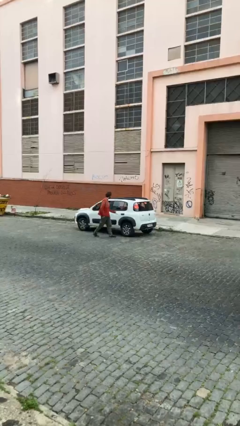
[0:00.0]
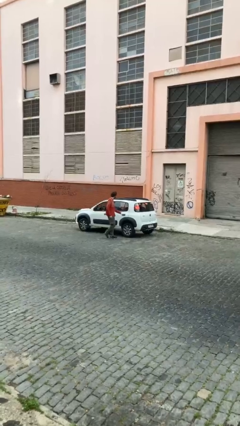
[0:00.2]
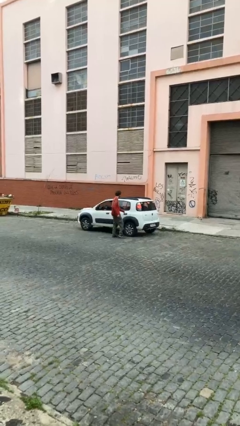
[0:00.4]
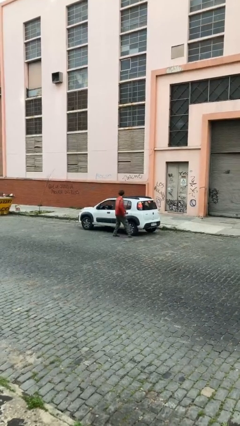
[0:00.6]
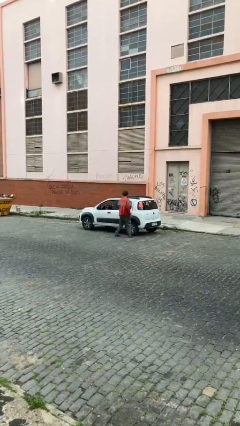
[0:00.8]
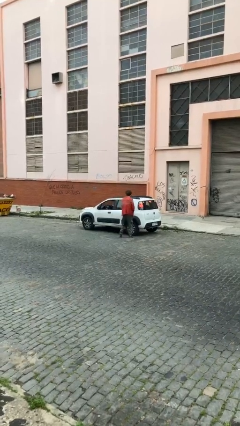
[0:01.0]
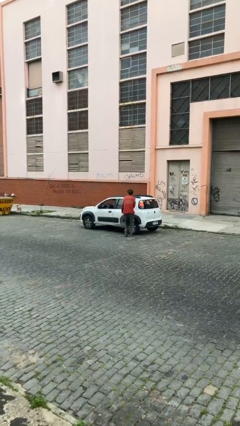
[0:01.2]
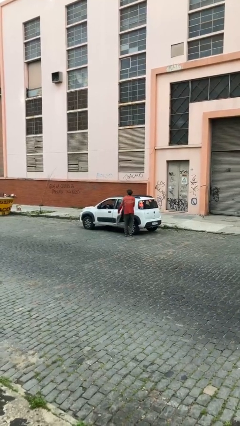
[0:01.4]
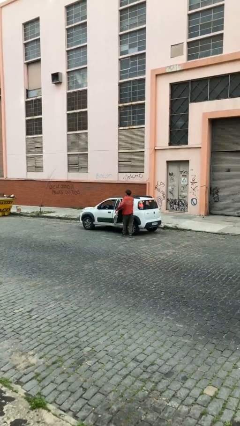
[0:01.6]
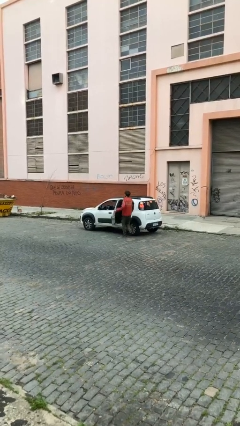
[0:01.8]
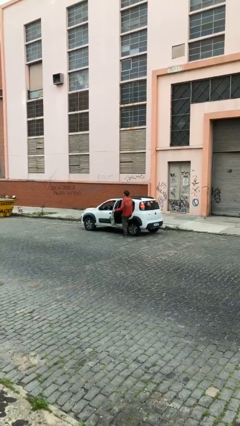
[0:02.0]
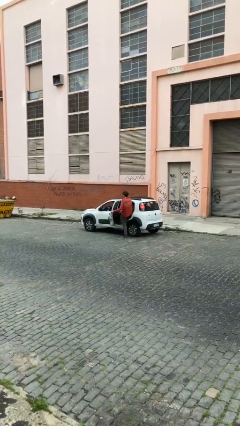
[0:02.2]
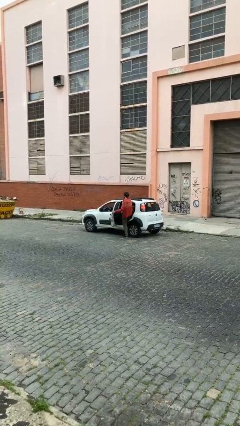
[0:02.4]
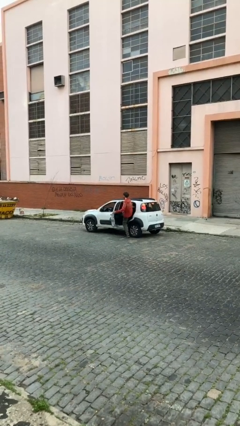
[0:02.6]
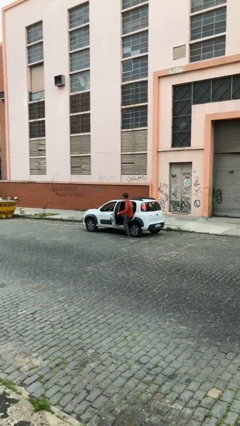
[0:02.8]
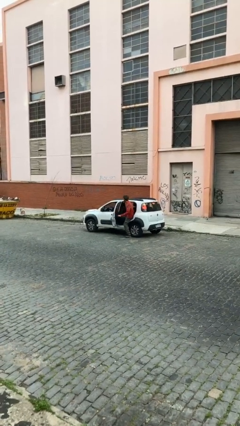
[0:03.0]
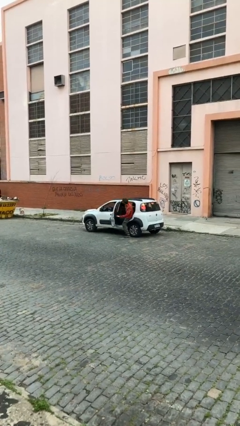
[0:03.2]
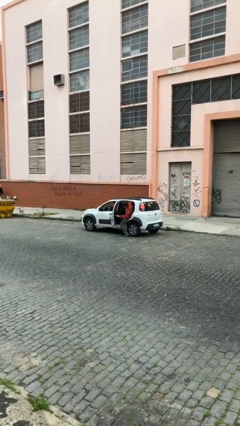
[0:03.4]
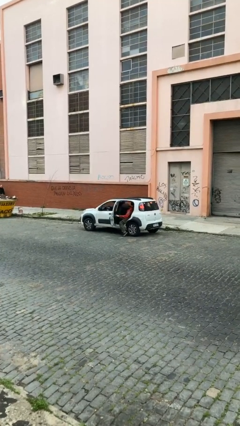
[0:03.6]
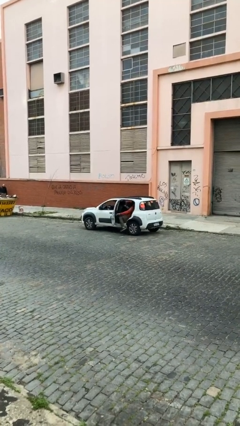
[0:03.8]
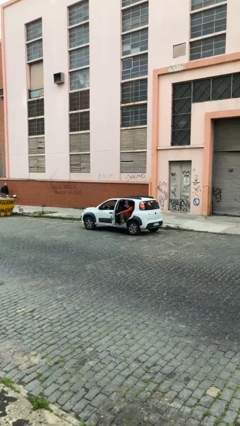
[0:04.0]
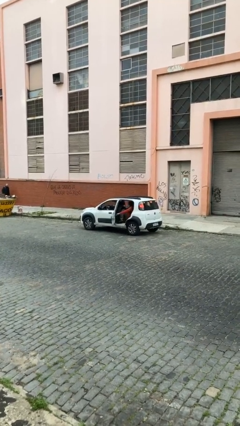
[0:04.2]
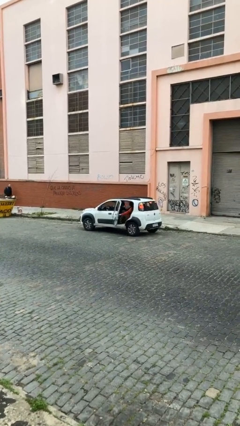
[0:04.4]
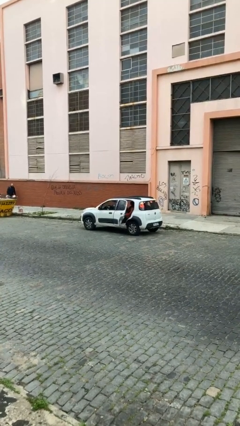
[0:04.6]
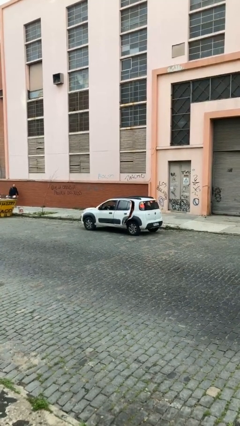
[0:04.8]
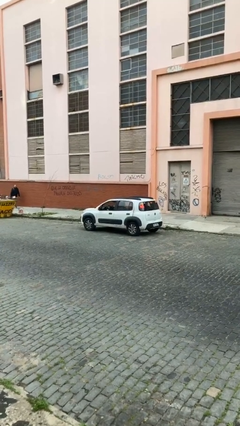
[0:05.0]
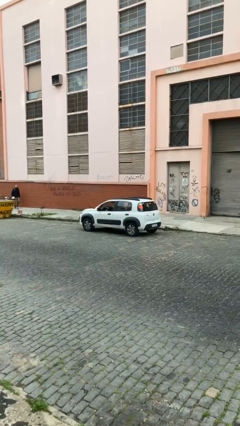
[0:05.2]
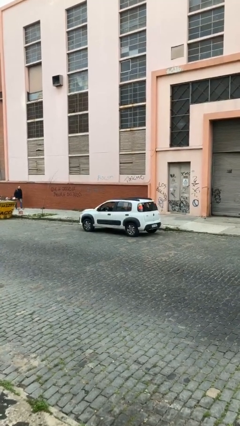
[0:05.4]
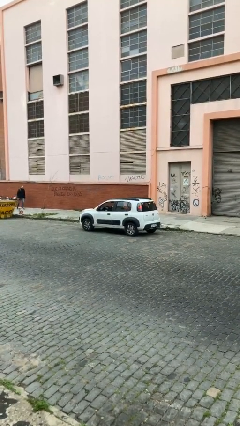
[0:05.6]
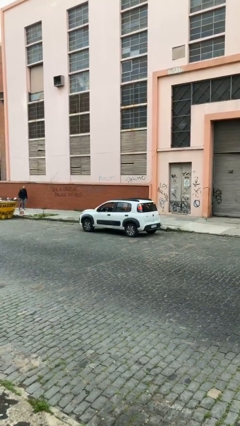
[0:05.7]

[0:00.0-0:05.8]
car picks up person

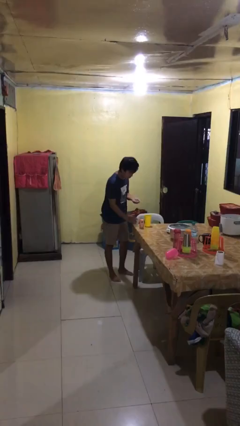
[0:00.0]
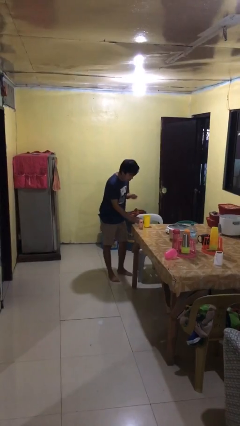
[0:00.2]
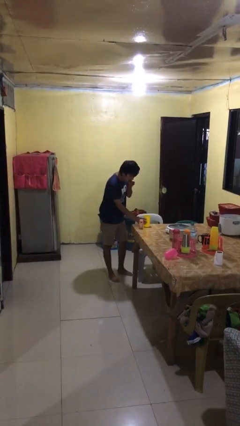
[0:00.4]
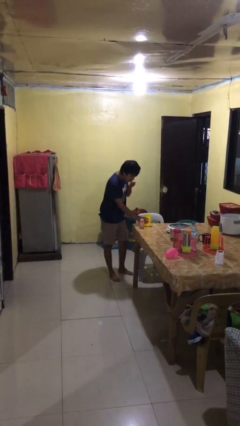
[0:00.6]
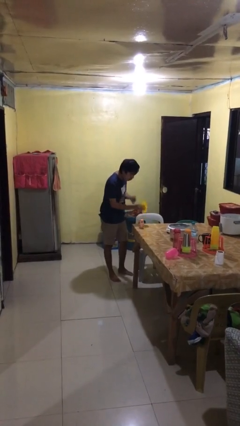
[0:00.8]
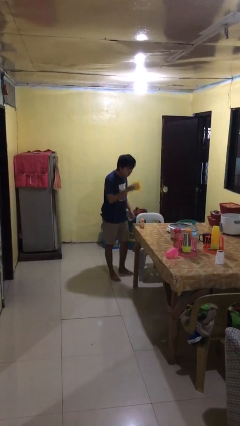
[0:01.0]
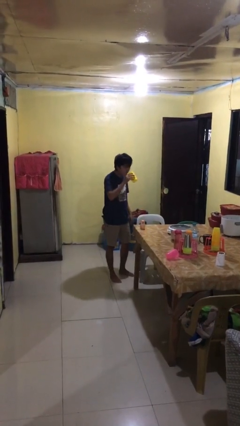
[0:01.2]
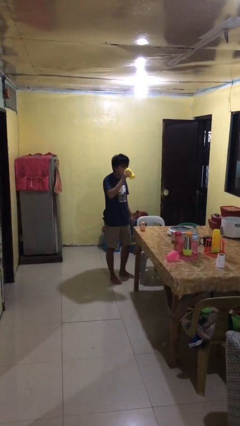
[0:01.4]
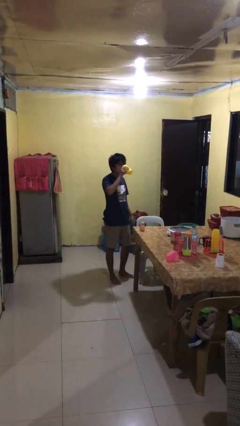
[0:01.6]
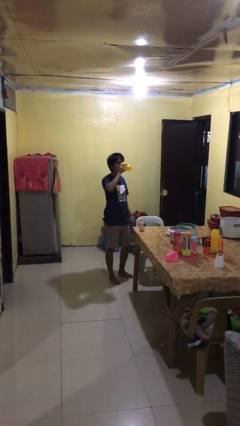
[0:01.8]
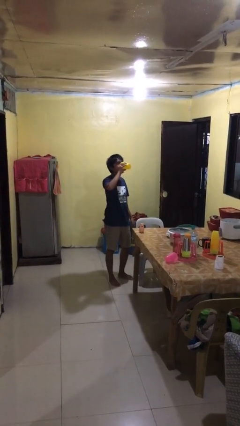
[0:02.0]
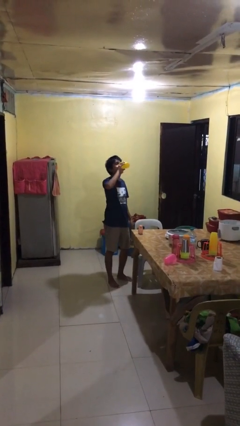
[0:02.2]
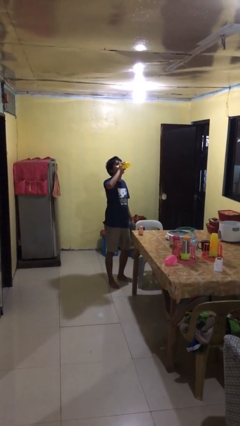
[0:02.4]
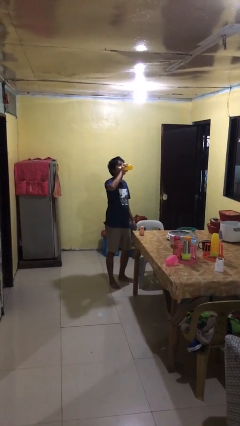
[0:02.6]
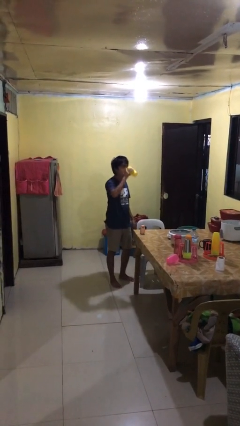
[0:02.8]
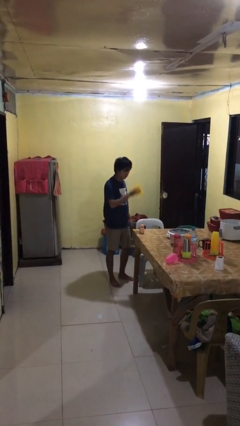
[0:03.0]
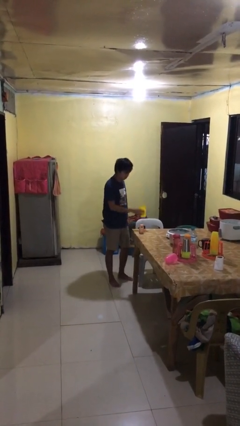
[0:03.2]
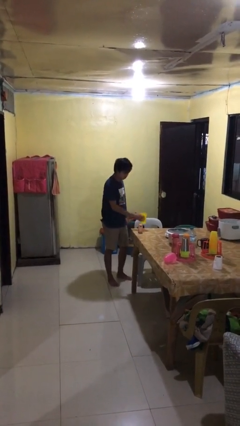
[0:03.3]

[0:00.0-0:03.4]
person drinks from cup

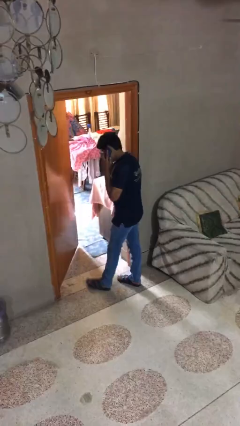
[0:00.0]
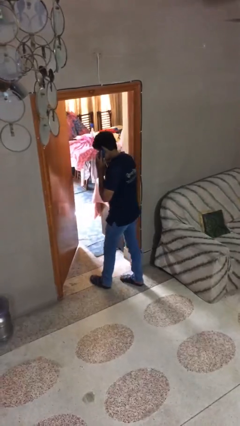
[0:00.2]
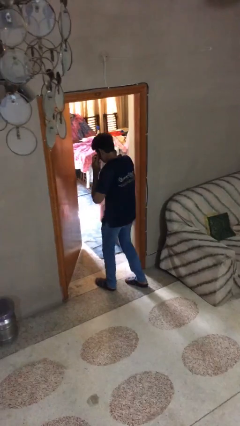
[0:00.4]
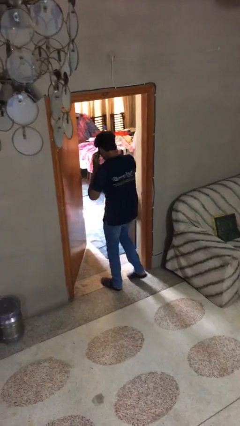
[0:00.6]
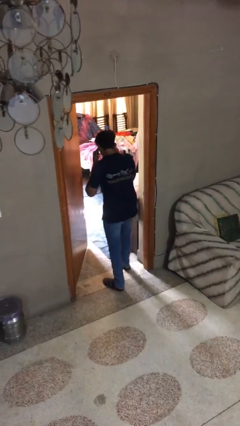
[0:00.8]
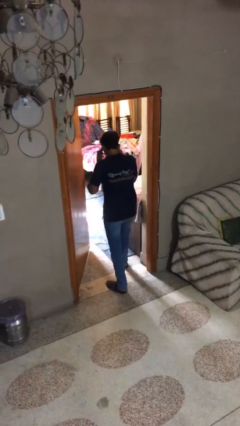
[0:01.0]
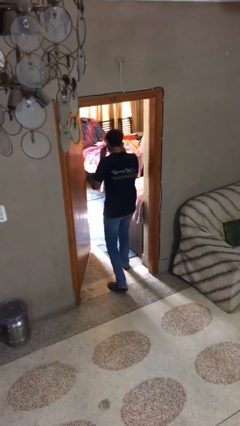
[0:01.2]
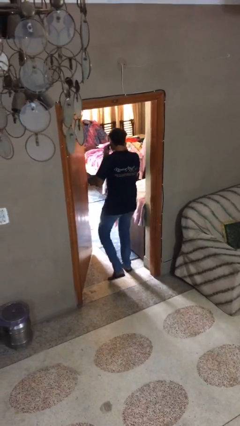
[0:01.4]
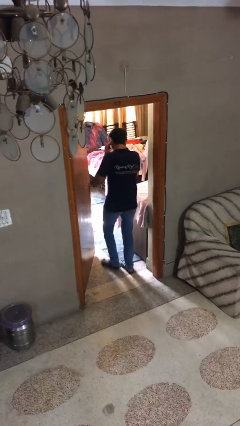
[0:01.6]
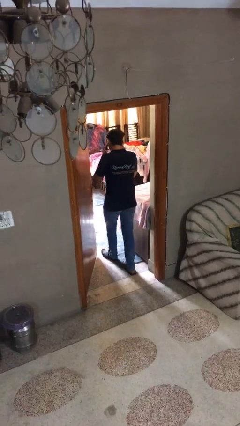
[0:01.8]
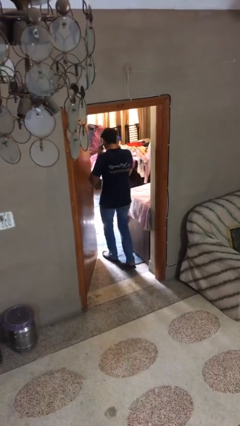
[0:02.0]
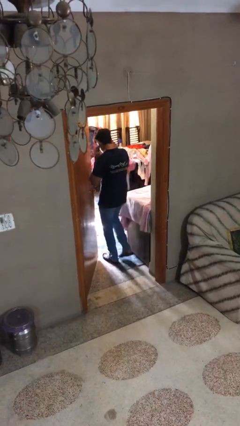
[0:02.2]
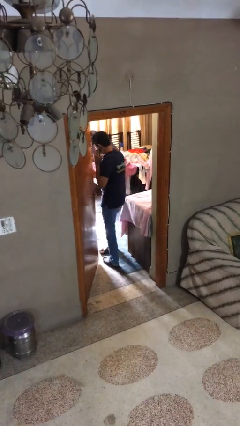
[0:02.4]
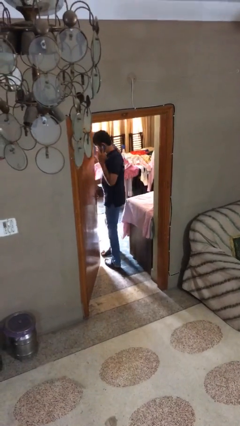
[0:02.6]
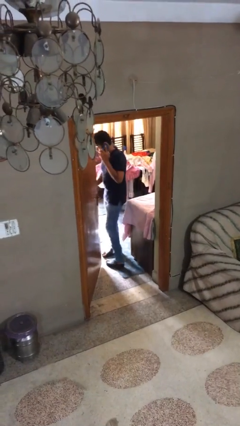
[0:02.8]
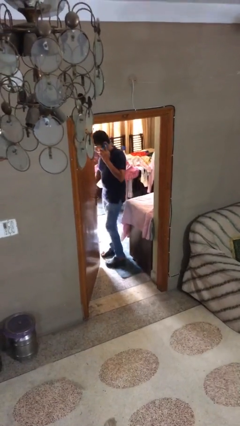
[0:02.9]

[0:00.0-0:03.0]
person exits scene through structure

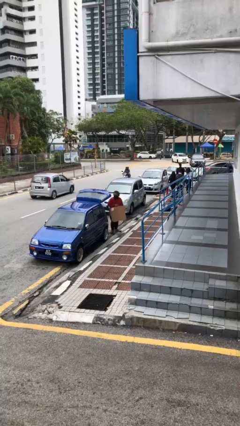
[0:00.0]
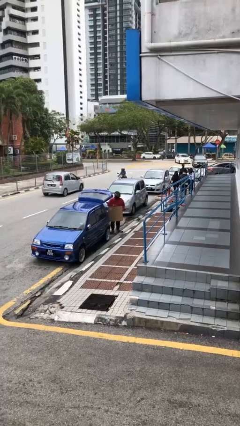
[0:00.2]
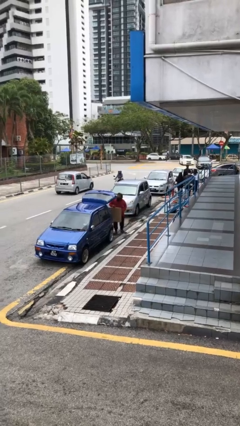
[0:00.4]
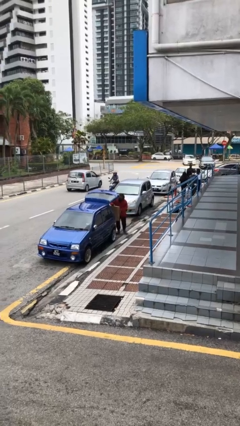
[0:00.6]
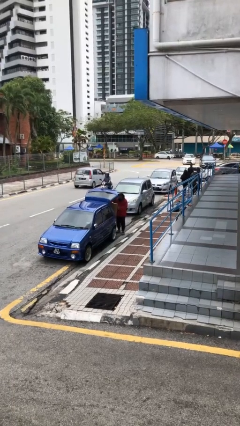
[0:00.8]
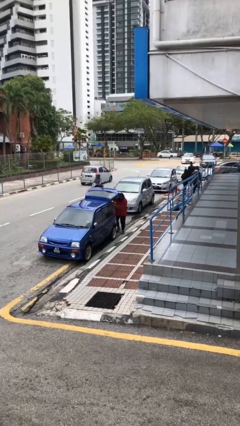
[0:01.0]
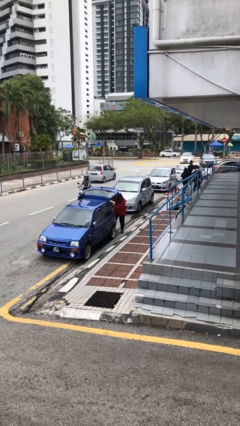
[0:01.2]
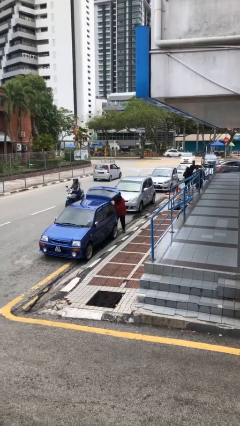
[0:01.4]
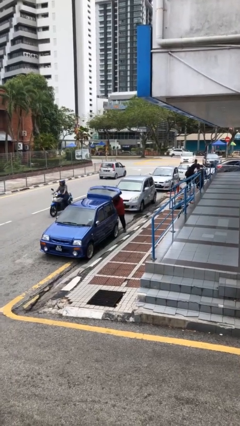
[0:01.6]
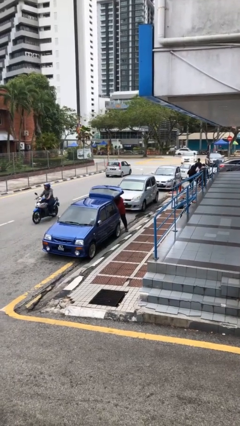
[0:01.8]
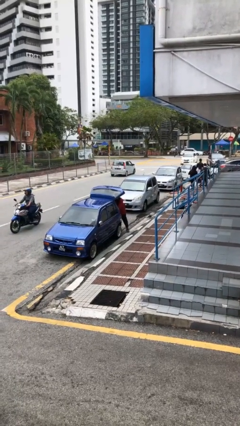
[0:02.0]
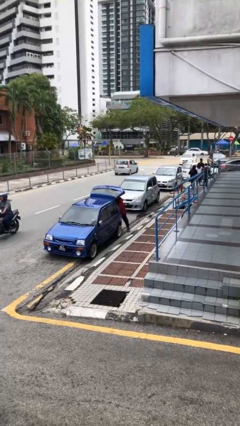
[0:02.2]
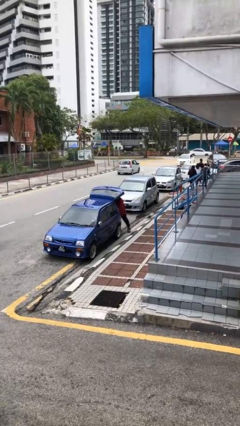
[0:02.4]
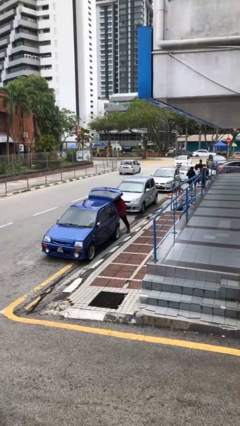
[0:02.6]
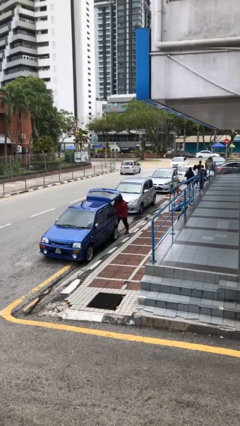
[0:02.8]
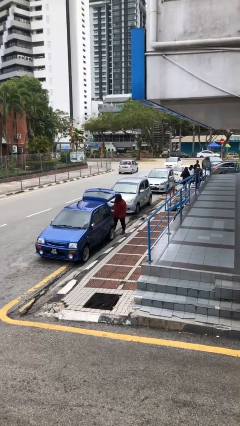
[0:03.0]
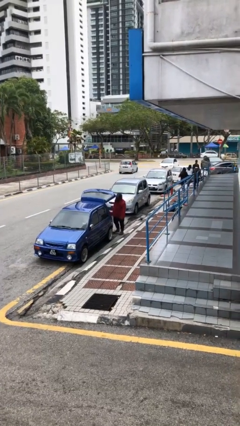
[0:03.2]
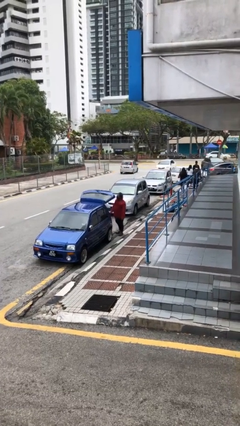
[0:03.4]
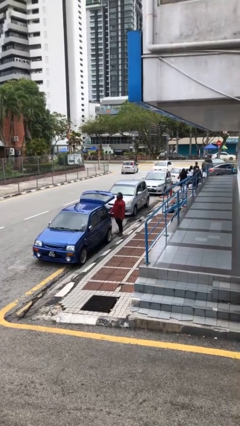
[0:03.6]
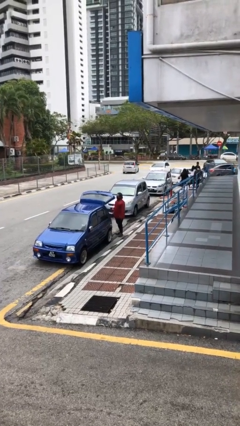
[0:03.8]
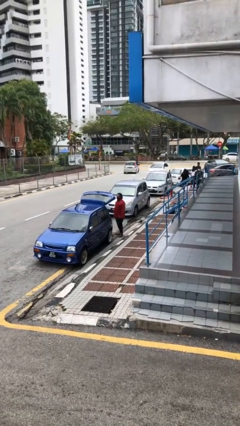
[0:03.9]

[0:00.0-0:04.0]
person loads car

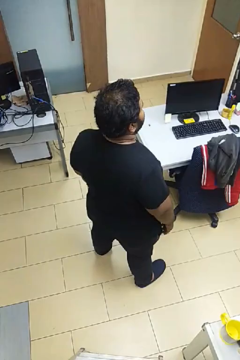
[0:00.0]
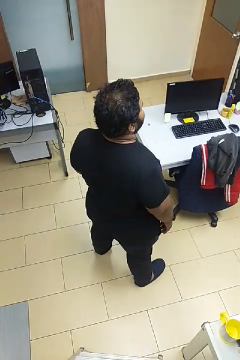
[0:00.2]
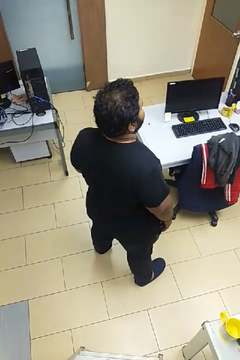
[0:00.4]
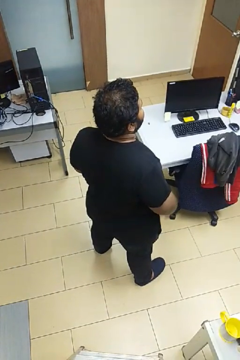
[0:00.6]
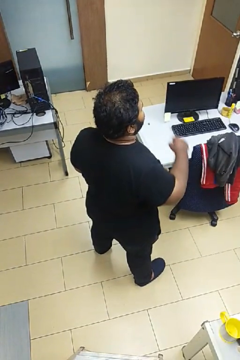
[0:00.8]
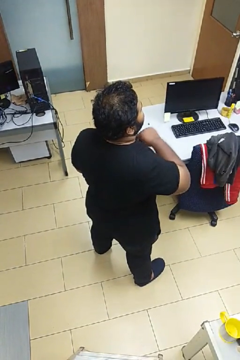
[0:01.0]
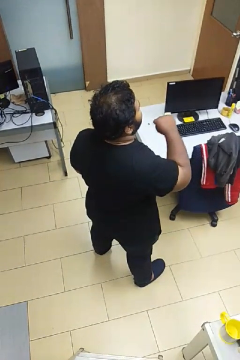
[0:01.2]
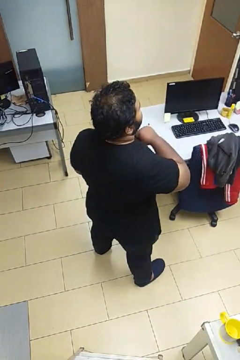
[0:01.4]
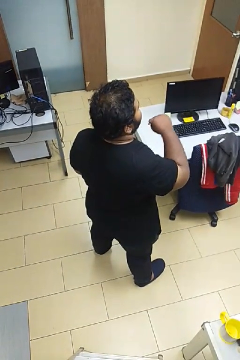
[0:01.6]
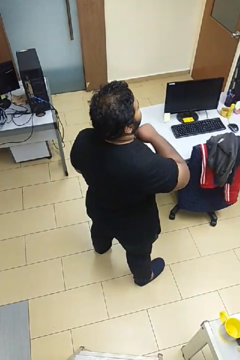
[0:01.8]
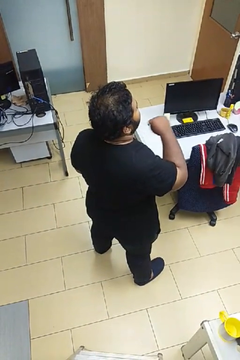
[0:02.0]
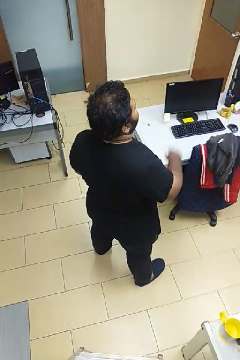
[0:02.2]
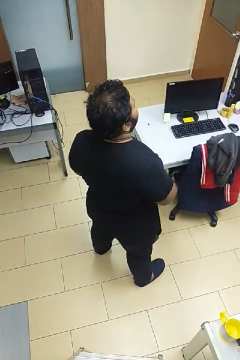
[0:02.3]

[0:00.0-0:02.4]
person drums on chest
